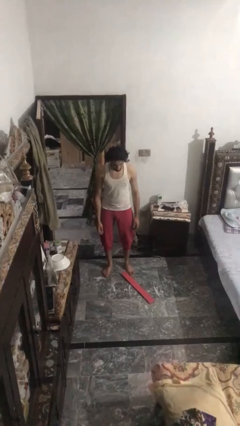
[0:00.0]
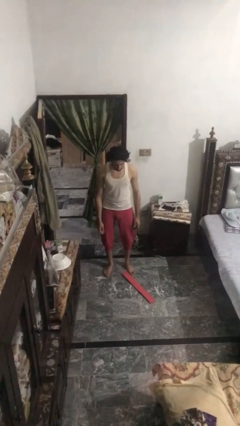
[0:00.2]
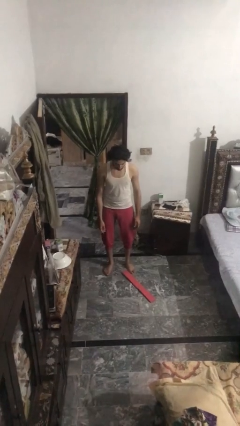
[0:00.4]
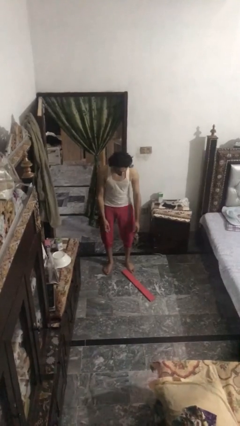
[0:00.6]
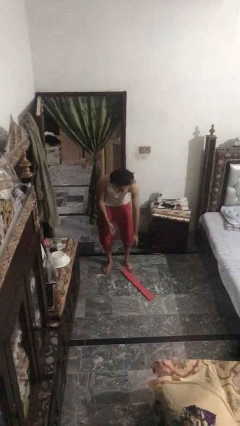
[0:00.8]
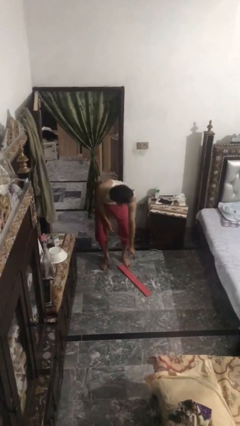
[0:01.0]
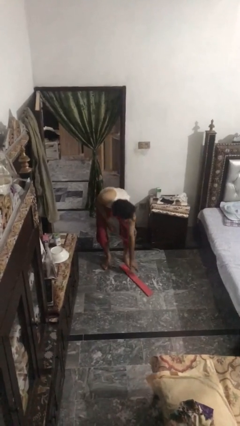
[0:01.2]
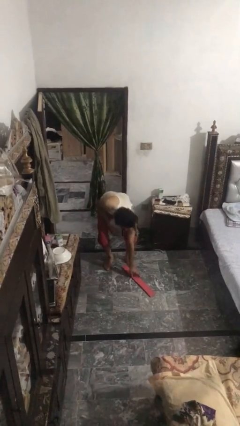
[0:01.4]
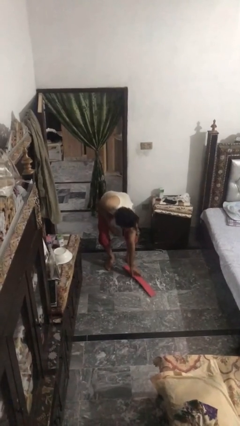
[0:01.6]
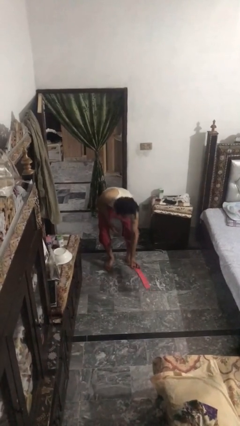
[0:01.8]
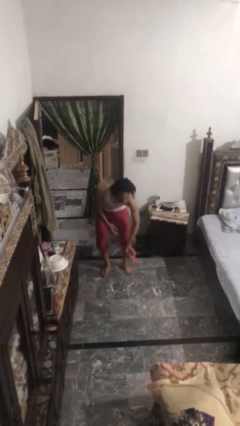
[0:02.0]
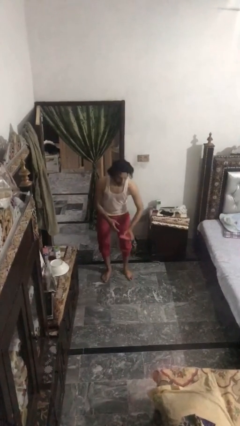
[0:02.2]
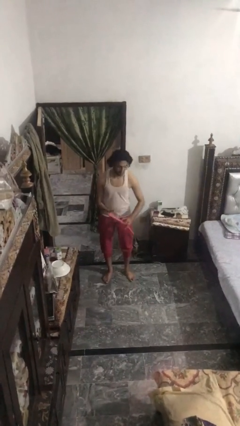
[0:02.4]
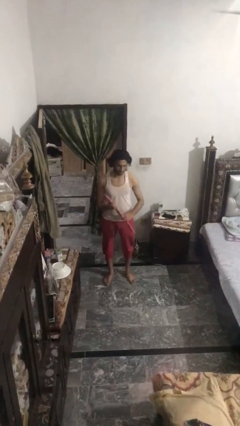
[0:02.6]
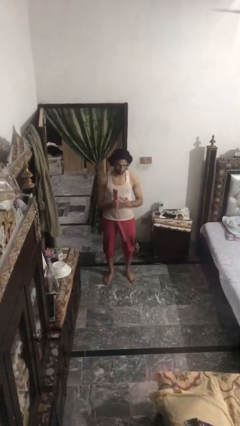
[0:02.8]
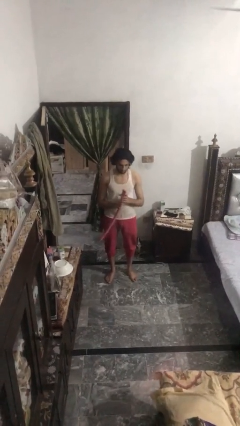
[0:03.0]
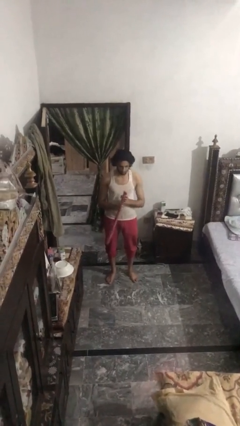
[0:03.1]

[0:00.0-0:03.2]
person picks up object from floor

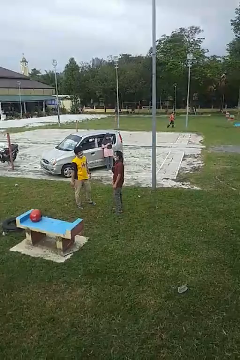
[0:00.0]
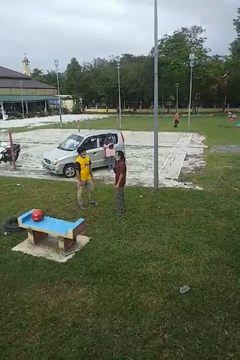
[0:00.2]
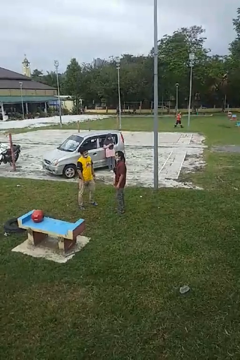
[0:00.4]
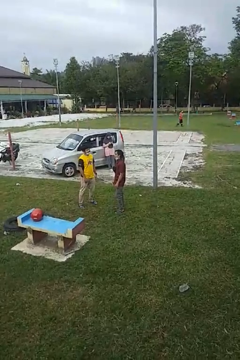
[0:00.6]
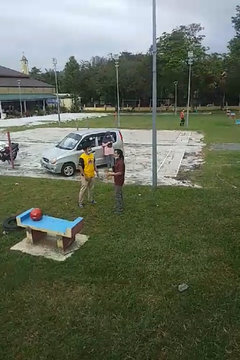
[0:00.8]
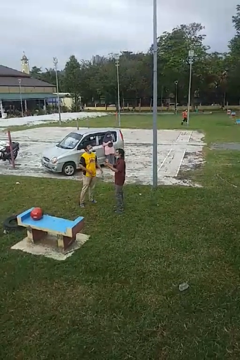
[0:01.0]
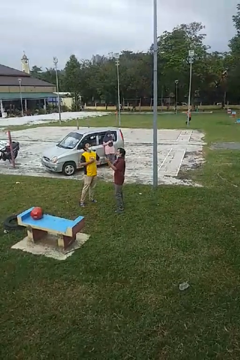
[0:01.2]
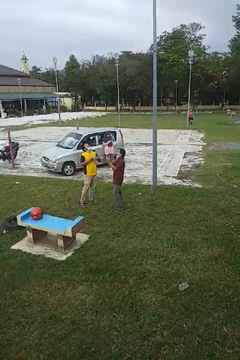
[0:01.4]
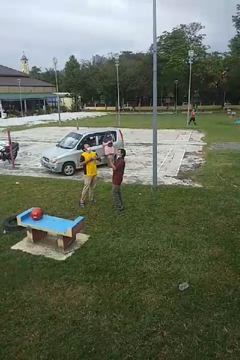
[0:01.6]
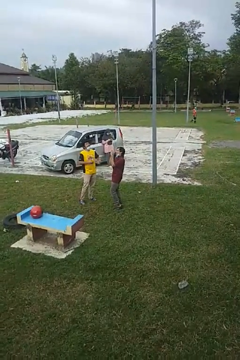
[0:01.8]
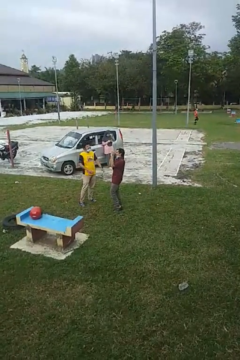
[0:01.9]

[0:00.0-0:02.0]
person laughs with person

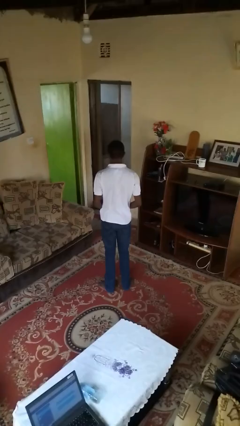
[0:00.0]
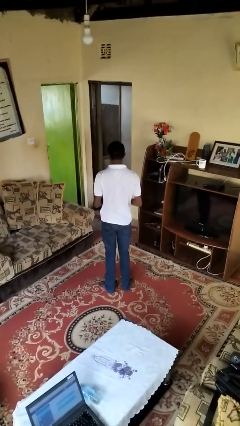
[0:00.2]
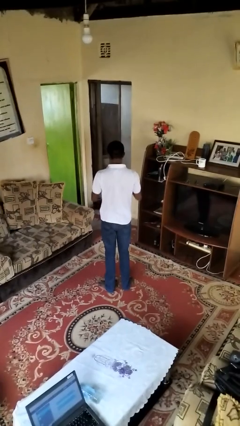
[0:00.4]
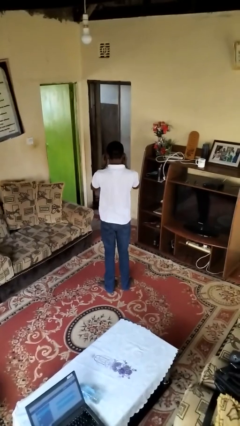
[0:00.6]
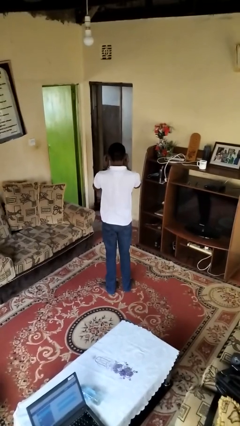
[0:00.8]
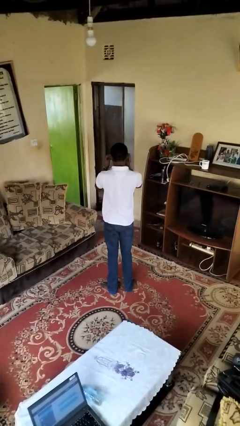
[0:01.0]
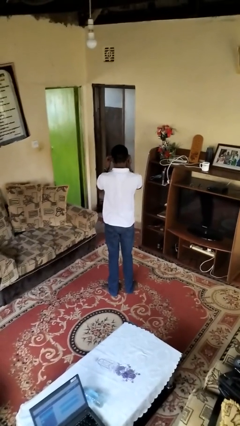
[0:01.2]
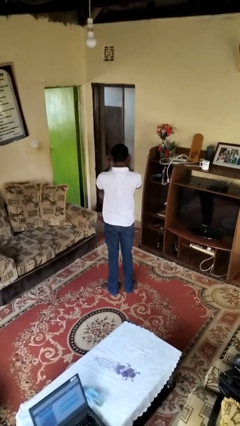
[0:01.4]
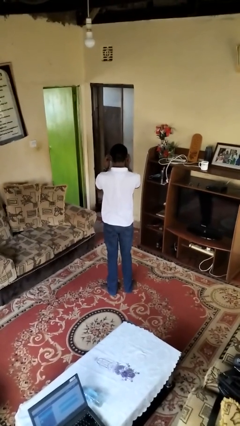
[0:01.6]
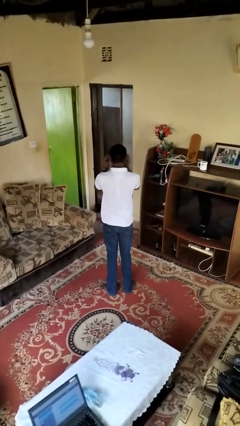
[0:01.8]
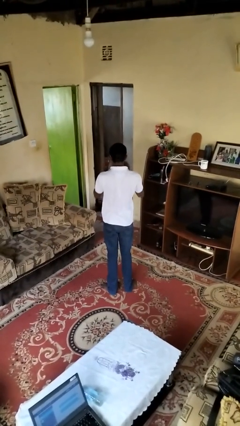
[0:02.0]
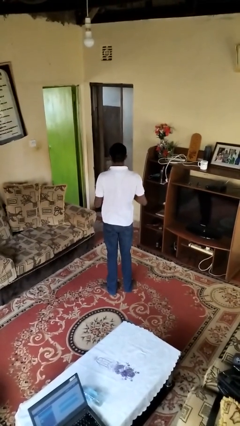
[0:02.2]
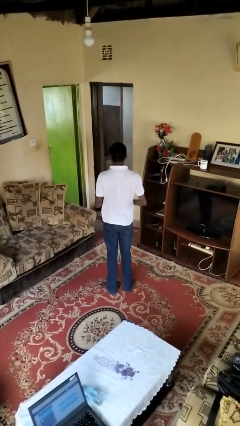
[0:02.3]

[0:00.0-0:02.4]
person puts on sunglasses

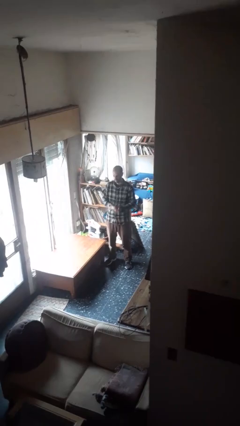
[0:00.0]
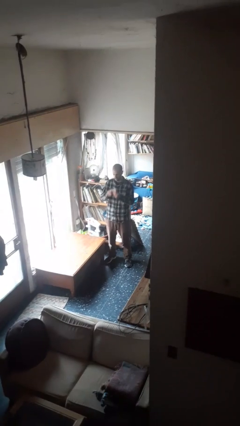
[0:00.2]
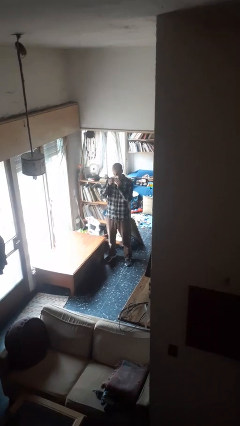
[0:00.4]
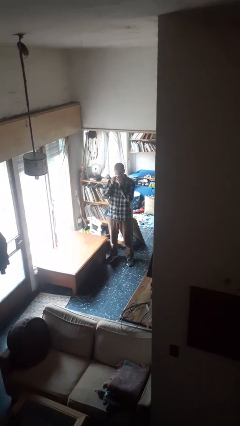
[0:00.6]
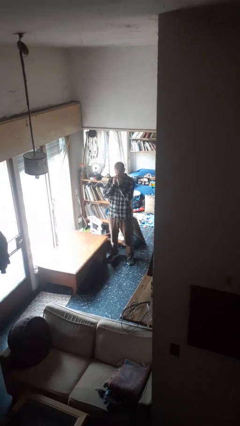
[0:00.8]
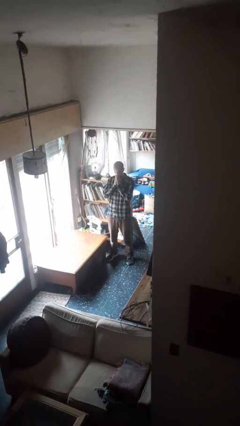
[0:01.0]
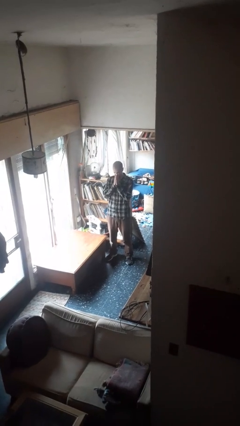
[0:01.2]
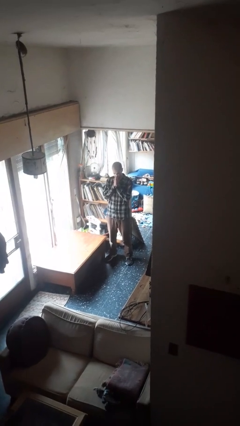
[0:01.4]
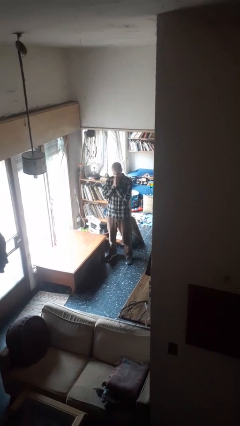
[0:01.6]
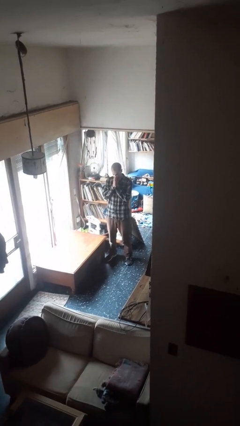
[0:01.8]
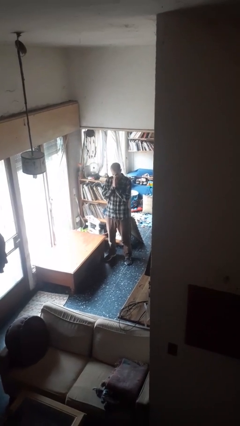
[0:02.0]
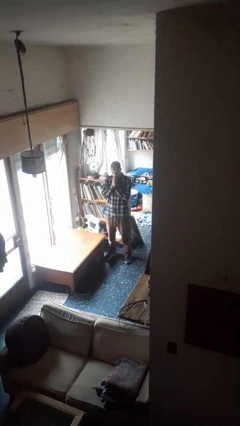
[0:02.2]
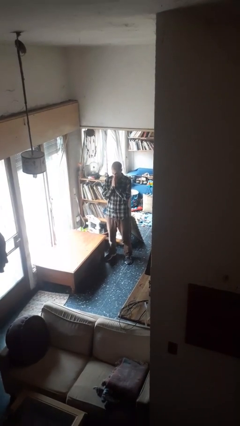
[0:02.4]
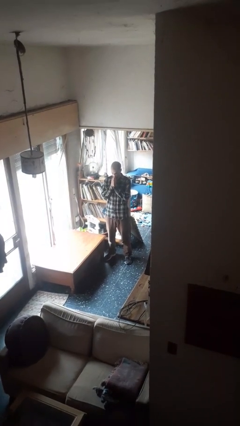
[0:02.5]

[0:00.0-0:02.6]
person blows nose

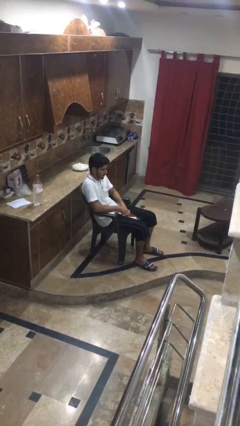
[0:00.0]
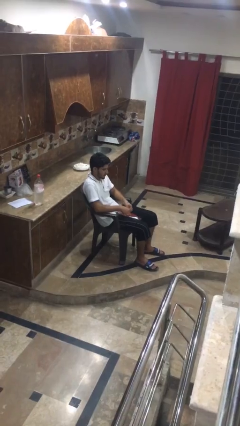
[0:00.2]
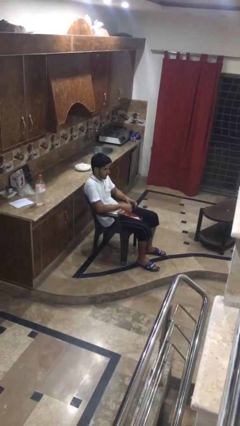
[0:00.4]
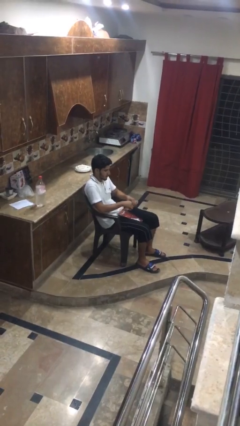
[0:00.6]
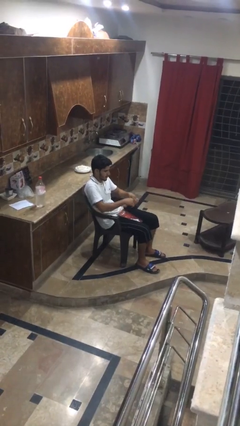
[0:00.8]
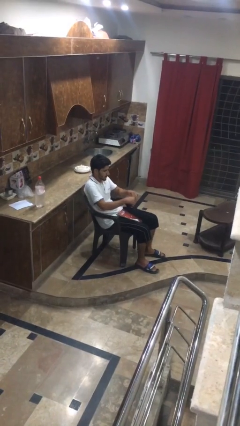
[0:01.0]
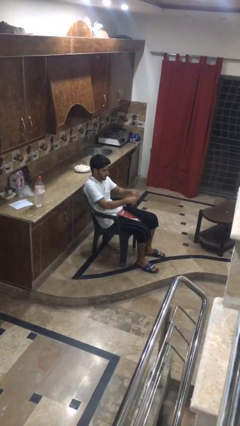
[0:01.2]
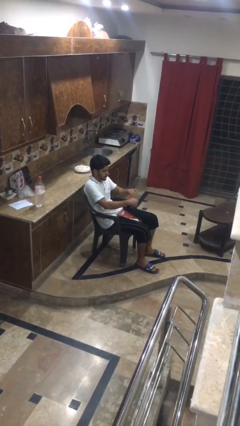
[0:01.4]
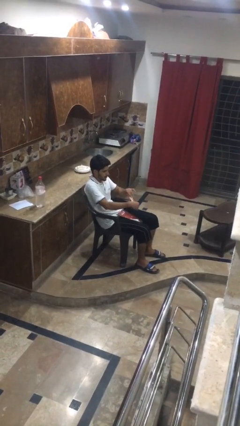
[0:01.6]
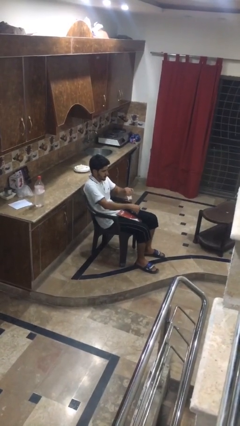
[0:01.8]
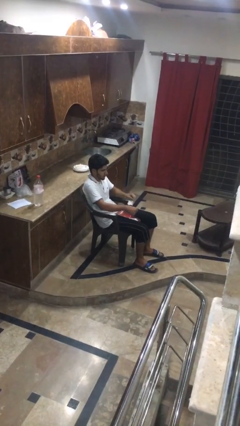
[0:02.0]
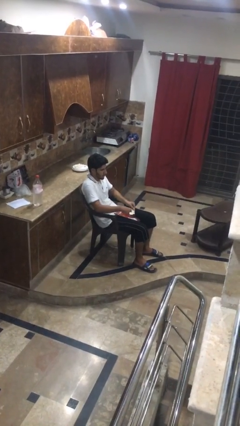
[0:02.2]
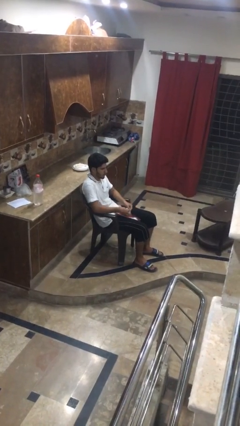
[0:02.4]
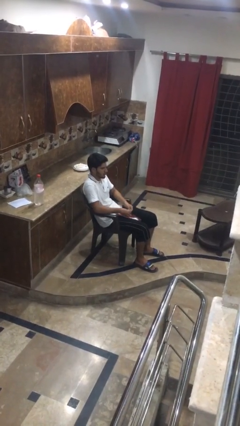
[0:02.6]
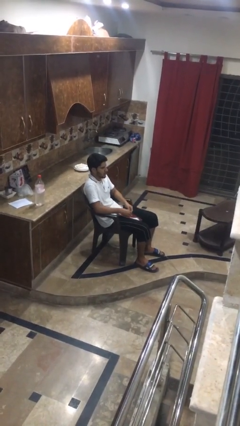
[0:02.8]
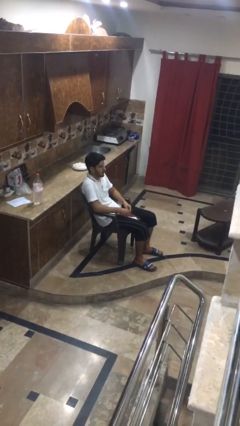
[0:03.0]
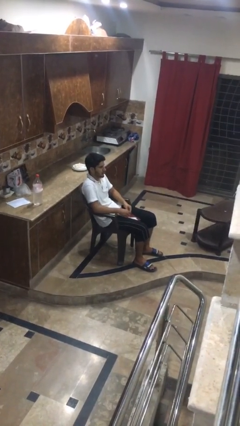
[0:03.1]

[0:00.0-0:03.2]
person tears paper

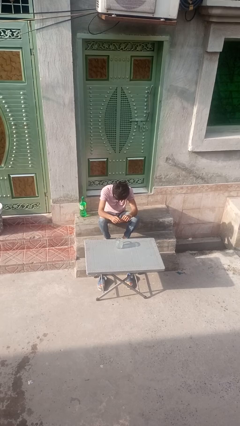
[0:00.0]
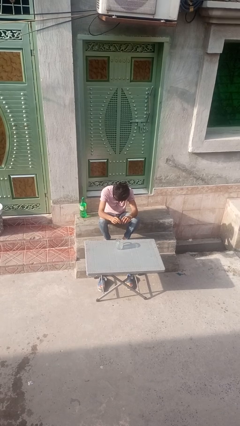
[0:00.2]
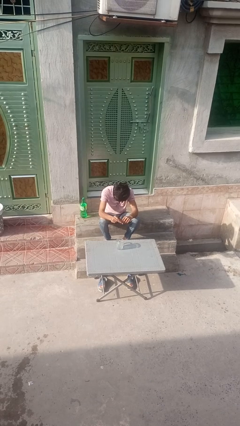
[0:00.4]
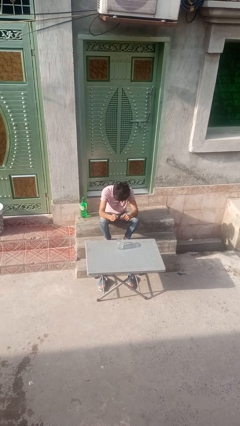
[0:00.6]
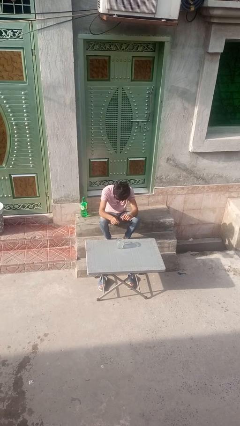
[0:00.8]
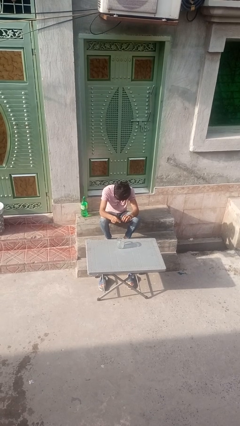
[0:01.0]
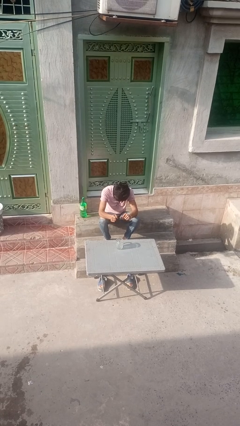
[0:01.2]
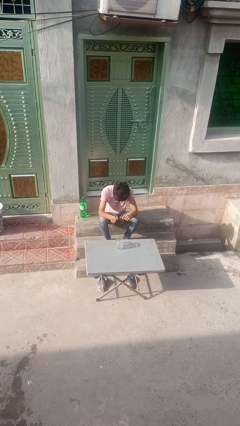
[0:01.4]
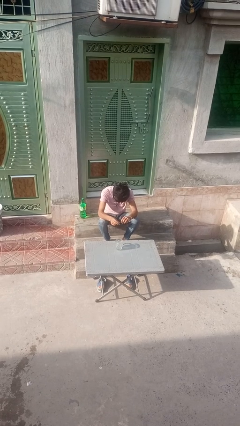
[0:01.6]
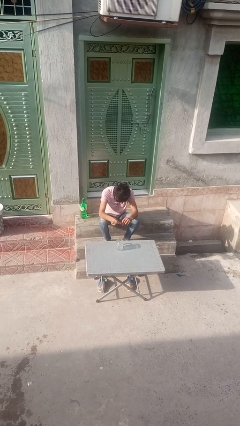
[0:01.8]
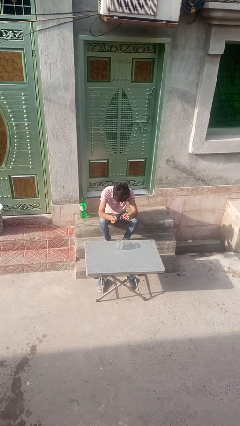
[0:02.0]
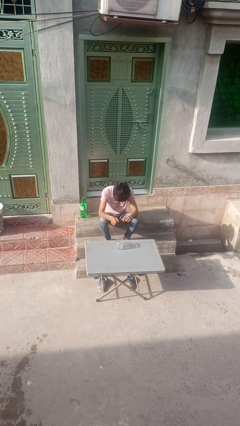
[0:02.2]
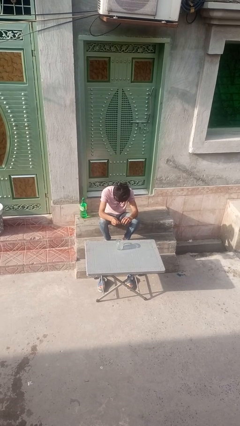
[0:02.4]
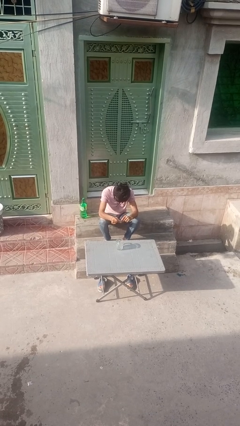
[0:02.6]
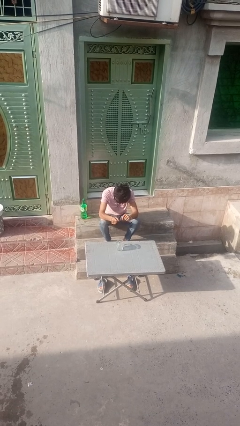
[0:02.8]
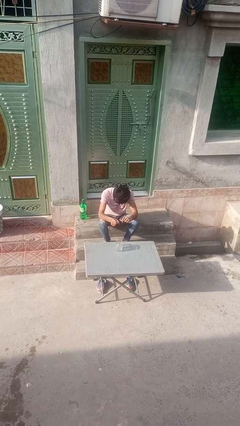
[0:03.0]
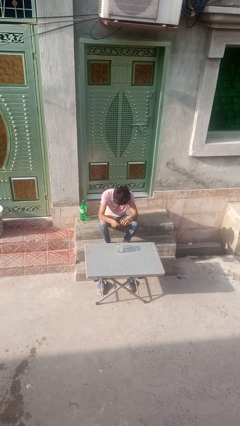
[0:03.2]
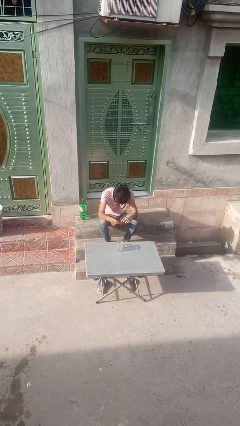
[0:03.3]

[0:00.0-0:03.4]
person snaps fingers

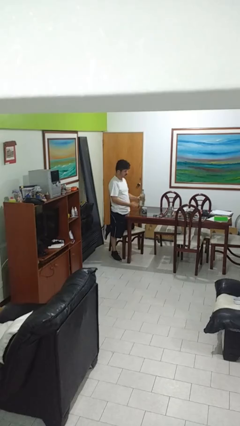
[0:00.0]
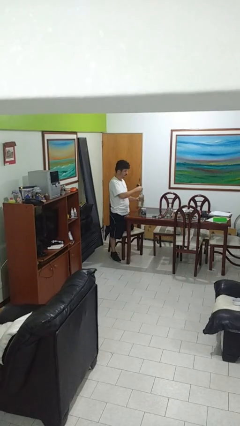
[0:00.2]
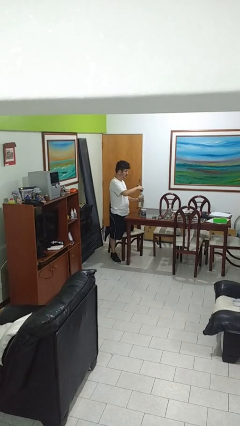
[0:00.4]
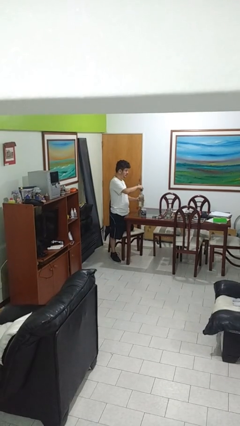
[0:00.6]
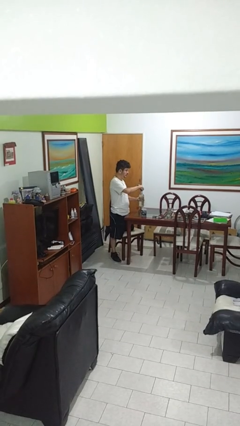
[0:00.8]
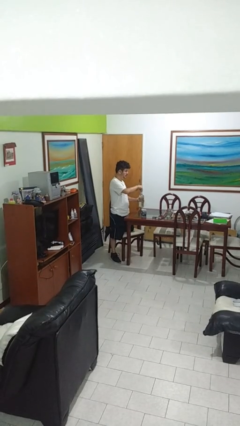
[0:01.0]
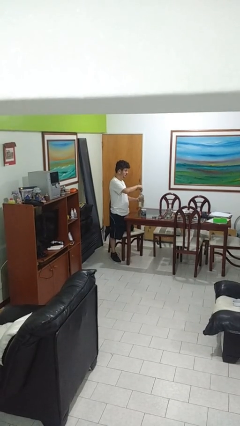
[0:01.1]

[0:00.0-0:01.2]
person screws lid to bottle
